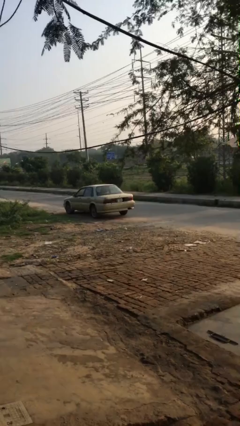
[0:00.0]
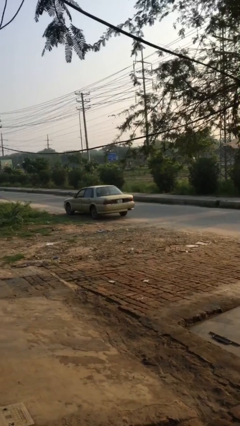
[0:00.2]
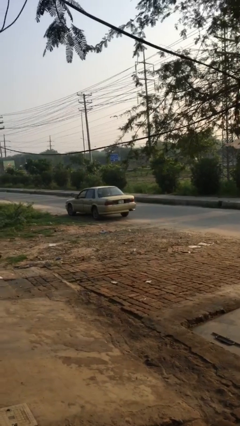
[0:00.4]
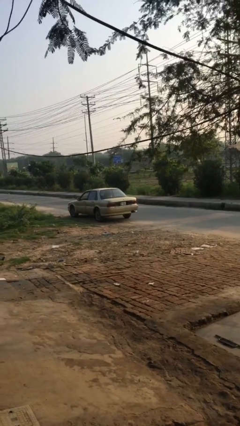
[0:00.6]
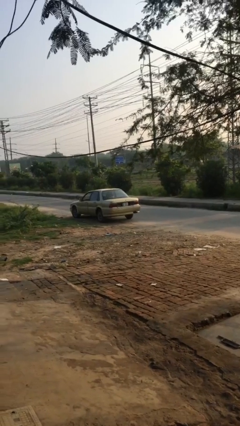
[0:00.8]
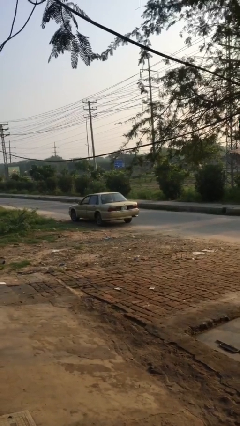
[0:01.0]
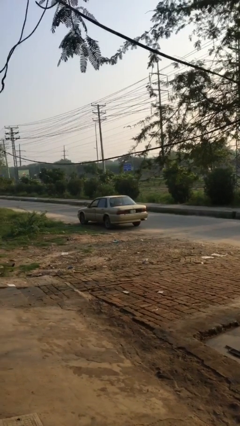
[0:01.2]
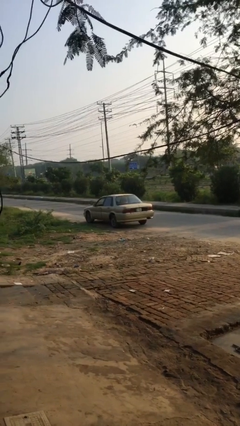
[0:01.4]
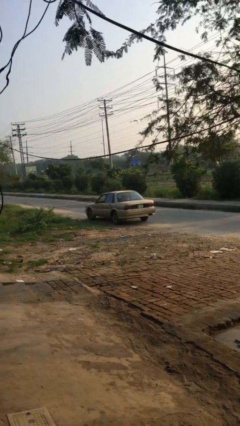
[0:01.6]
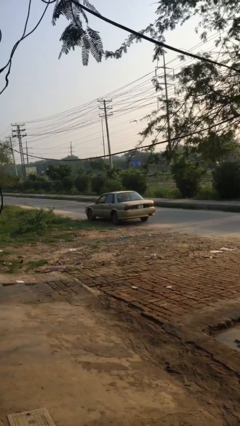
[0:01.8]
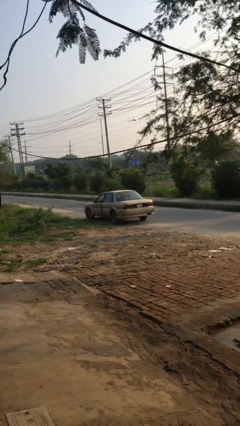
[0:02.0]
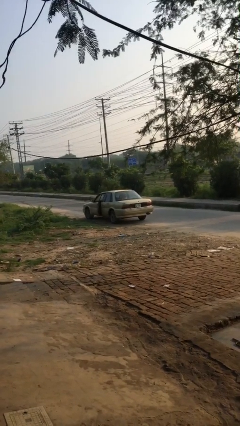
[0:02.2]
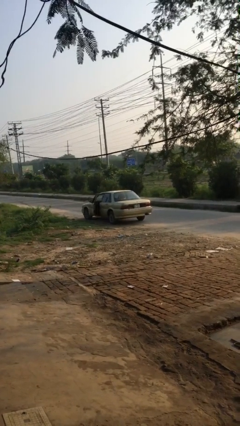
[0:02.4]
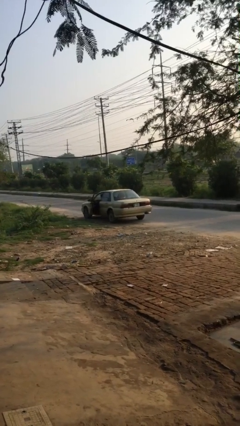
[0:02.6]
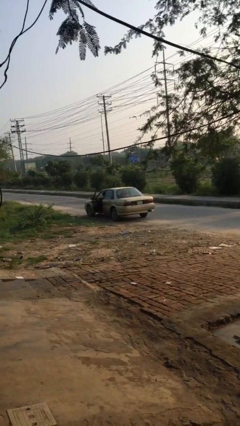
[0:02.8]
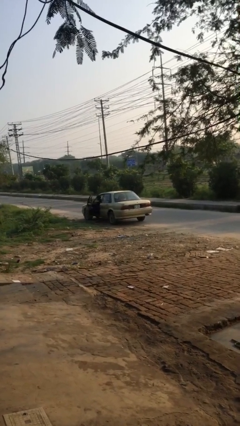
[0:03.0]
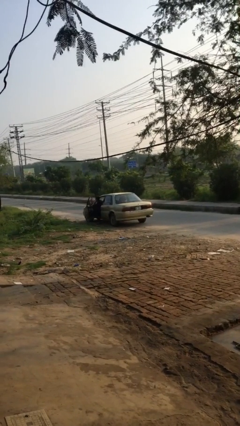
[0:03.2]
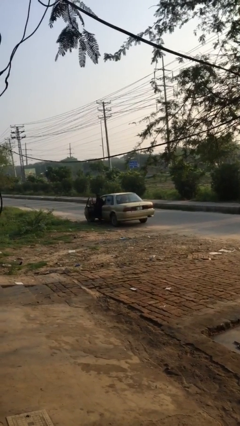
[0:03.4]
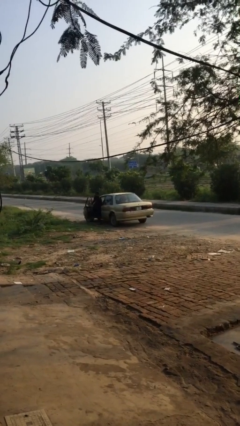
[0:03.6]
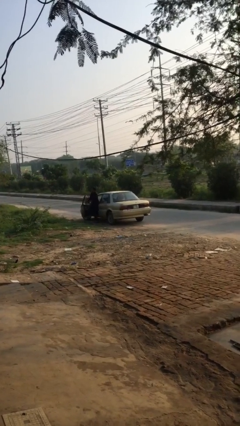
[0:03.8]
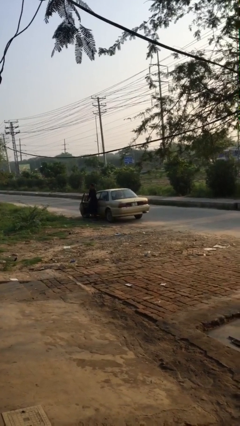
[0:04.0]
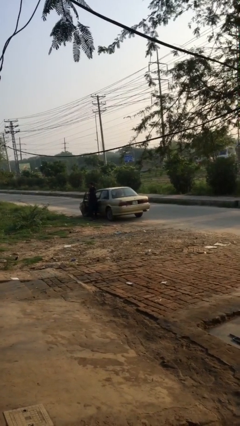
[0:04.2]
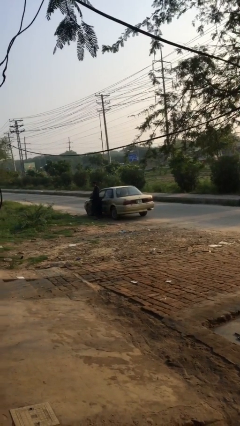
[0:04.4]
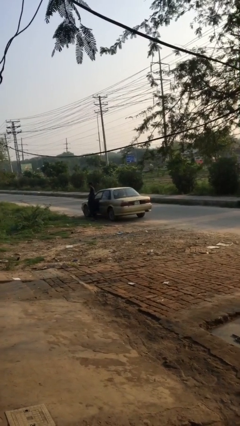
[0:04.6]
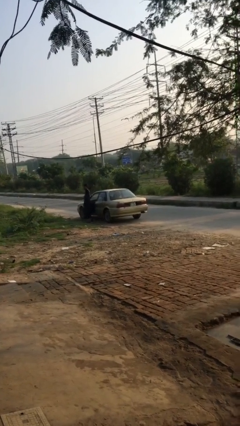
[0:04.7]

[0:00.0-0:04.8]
car drops off person

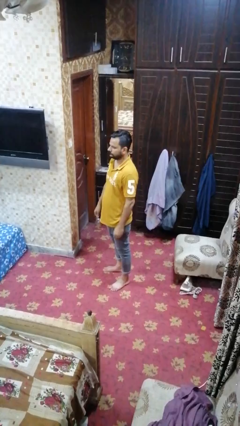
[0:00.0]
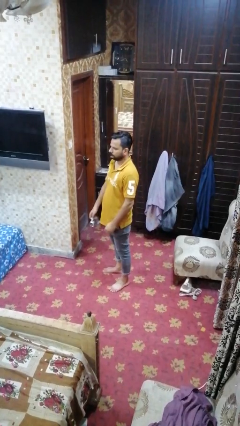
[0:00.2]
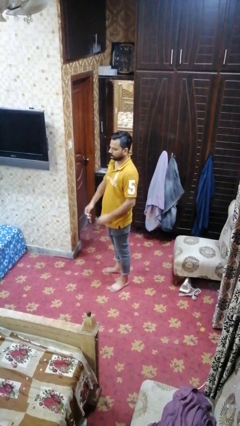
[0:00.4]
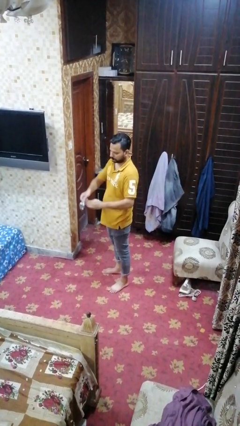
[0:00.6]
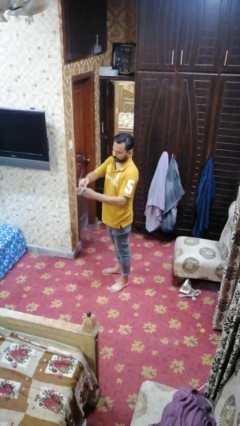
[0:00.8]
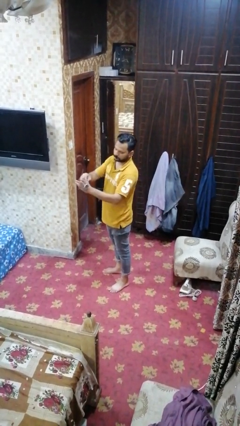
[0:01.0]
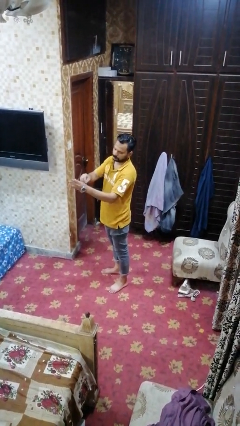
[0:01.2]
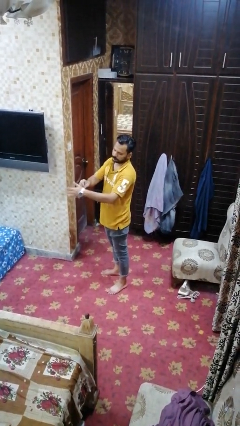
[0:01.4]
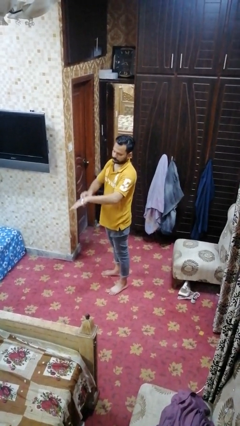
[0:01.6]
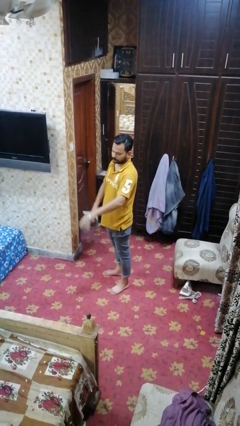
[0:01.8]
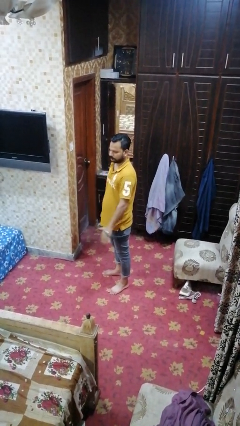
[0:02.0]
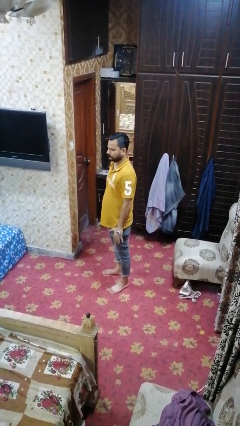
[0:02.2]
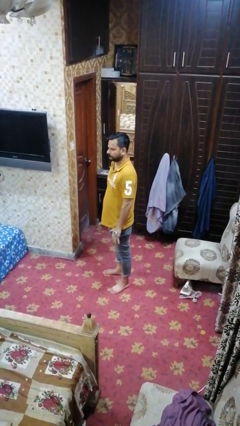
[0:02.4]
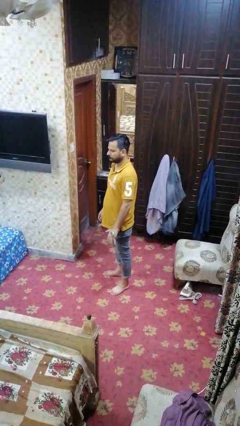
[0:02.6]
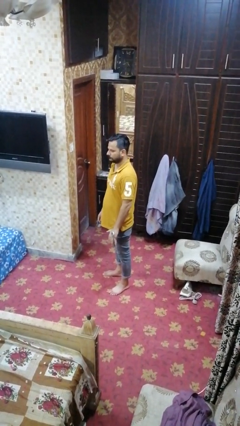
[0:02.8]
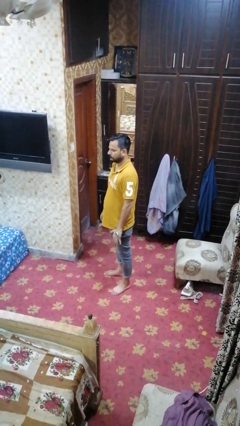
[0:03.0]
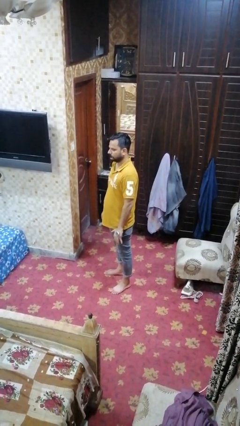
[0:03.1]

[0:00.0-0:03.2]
person puts on wristwatch

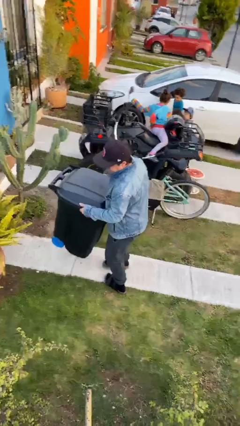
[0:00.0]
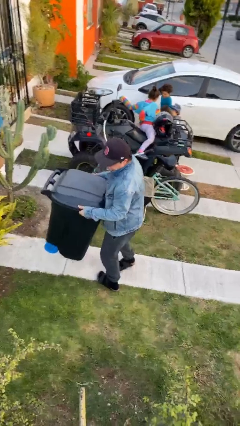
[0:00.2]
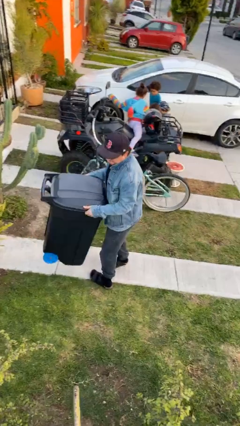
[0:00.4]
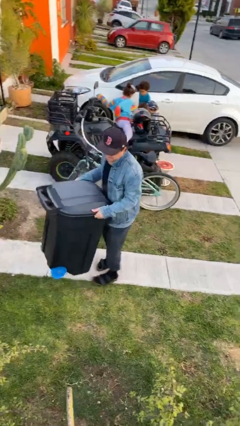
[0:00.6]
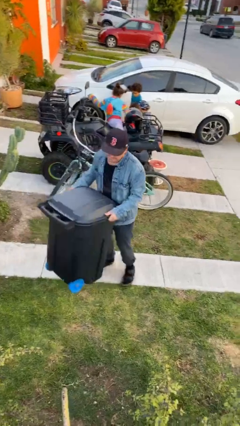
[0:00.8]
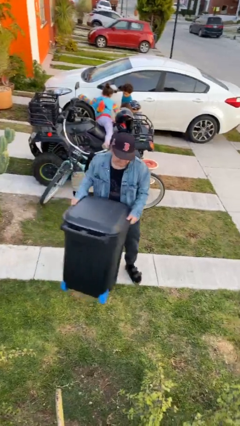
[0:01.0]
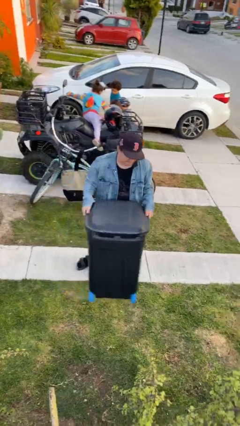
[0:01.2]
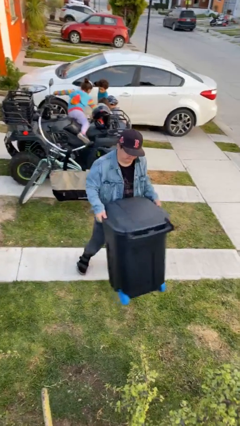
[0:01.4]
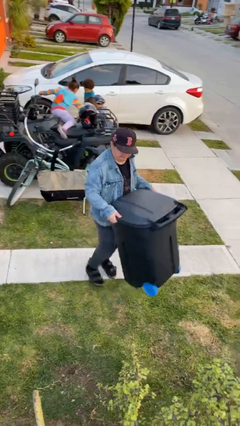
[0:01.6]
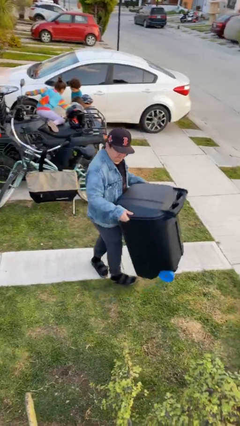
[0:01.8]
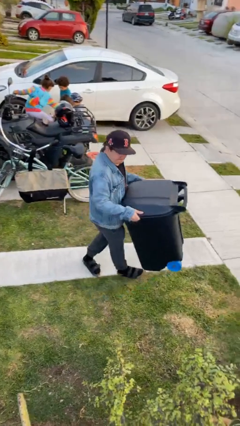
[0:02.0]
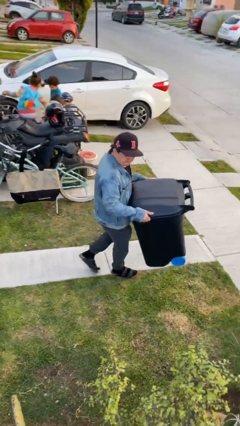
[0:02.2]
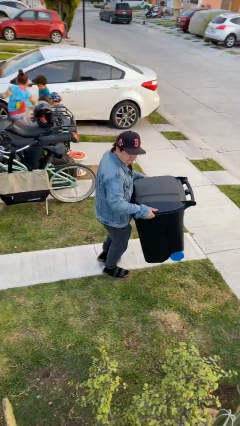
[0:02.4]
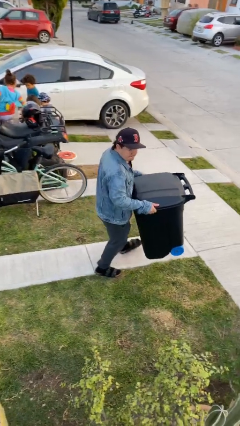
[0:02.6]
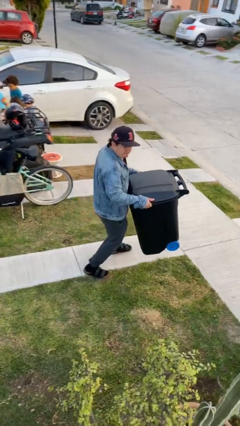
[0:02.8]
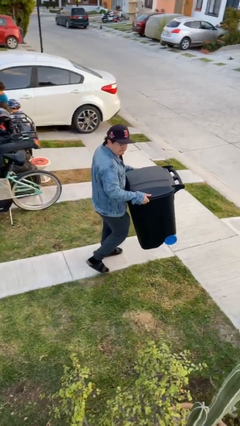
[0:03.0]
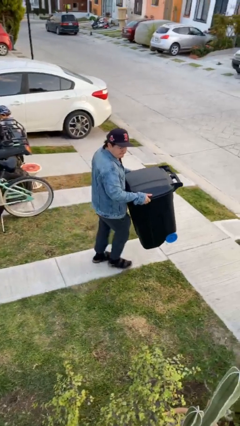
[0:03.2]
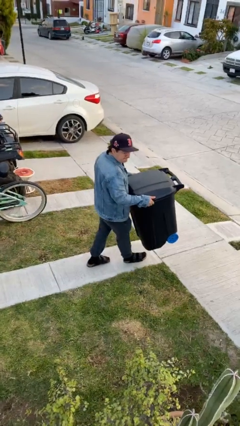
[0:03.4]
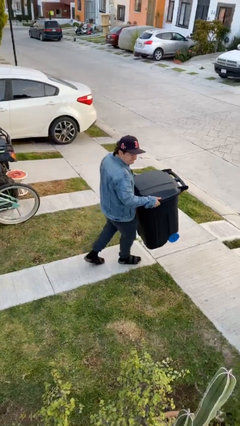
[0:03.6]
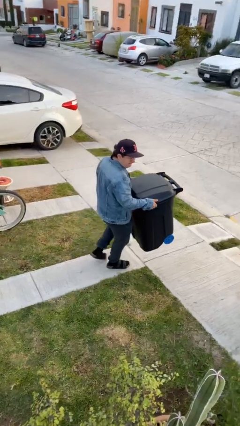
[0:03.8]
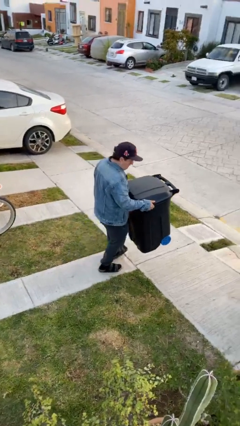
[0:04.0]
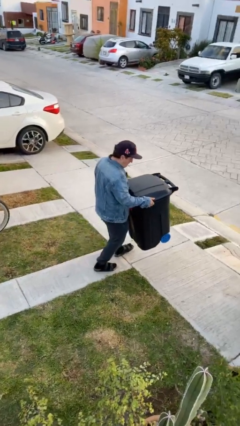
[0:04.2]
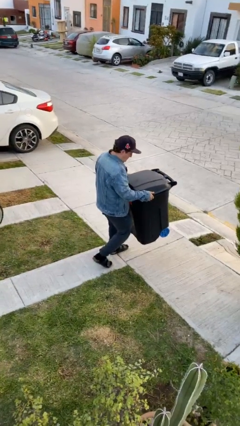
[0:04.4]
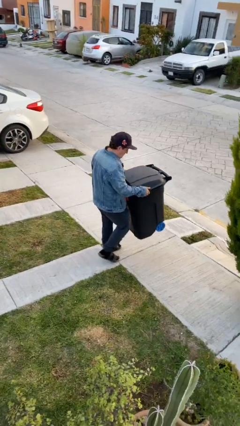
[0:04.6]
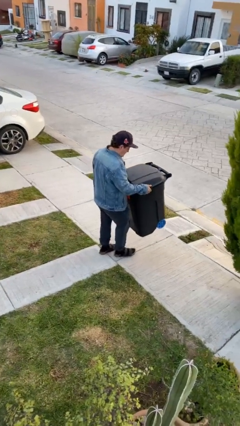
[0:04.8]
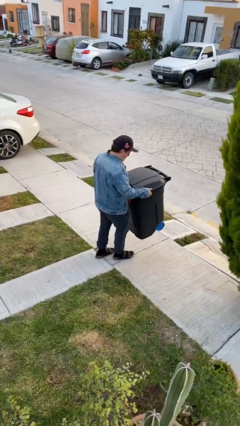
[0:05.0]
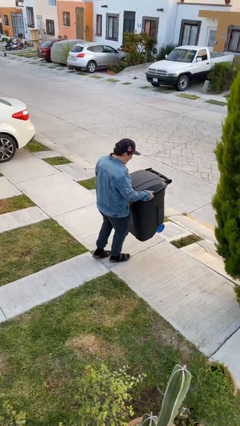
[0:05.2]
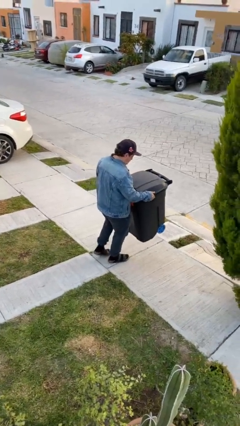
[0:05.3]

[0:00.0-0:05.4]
person carries heavy object

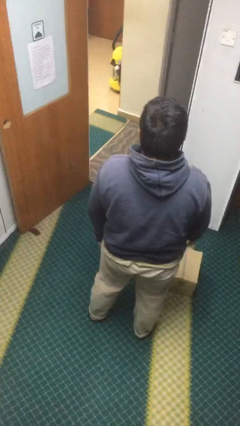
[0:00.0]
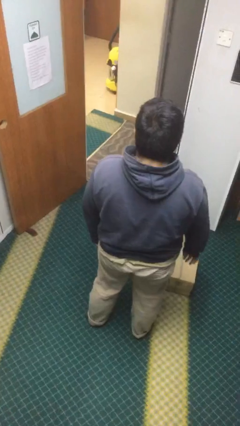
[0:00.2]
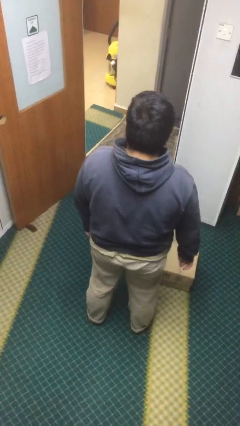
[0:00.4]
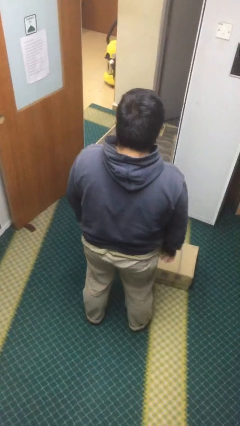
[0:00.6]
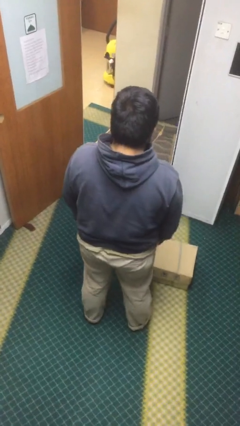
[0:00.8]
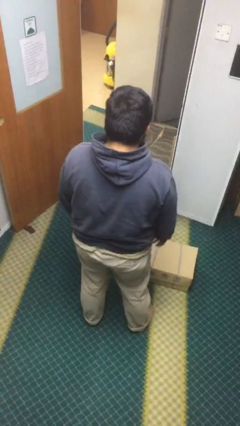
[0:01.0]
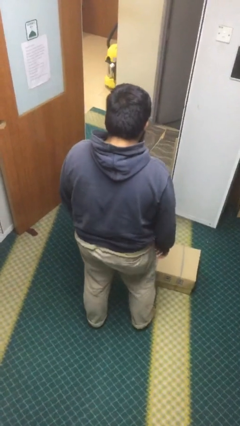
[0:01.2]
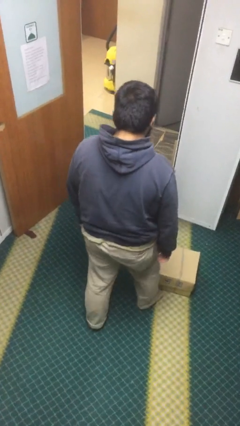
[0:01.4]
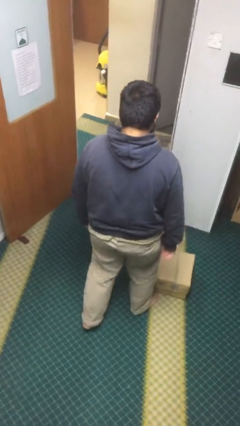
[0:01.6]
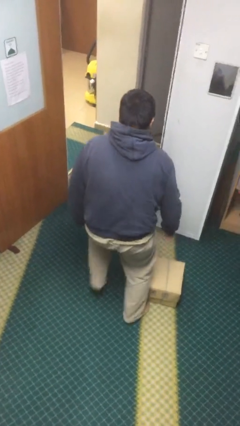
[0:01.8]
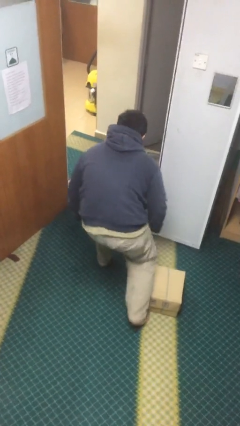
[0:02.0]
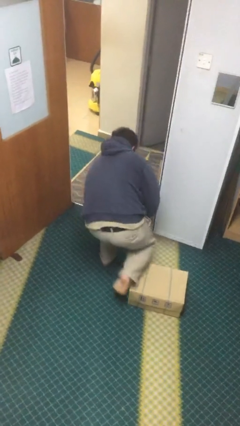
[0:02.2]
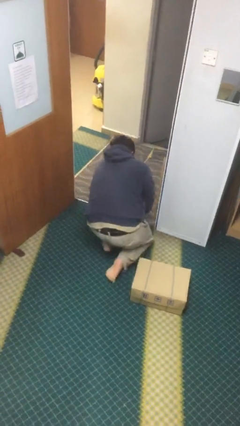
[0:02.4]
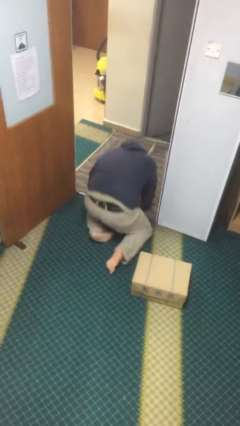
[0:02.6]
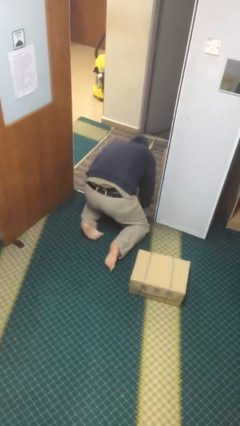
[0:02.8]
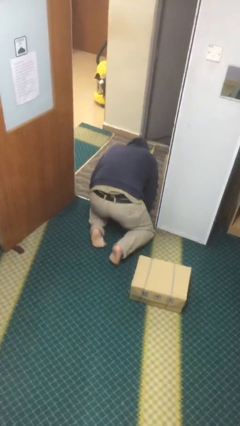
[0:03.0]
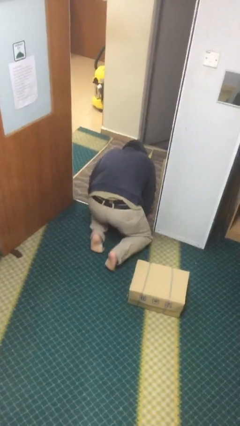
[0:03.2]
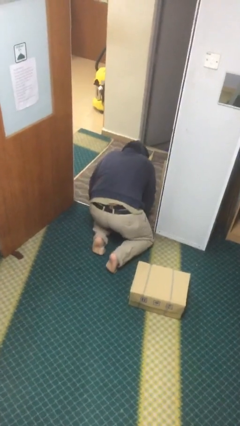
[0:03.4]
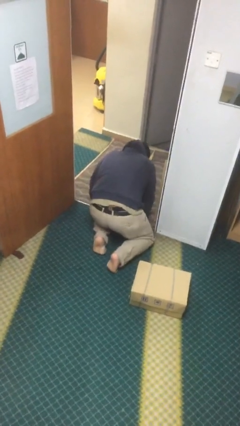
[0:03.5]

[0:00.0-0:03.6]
person trips on object on floor

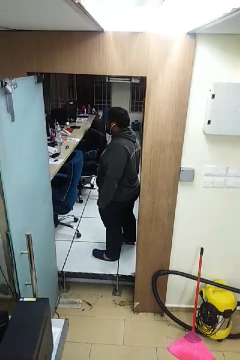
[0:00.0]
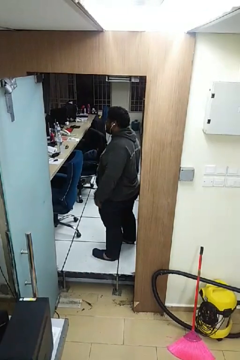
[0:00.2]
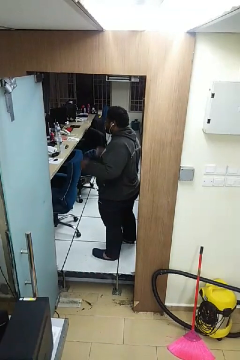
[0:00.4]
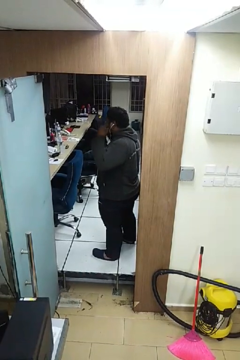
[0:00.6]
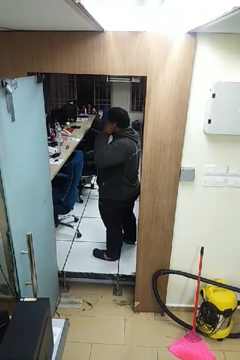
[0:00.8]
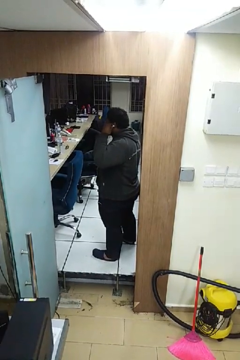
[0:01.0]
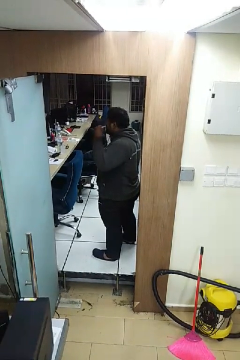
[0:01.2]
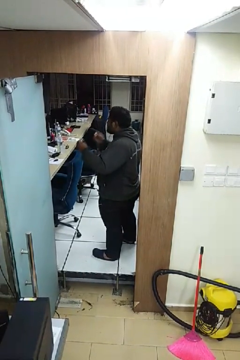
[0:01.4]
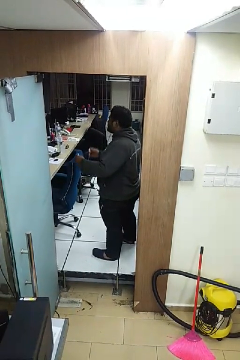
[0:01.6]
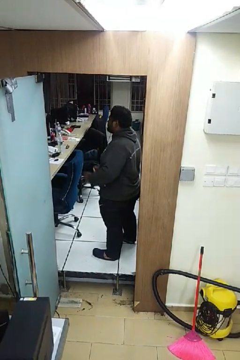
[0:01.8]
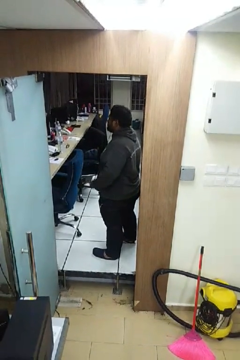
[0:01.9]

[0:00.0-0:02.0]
person takes off headphones
